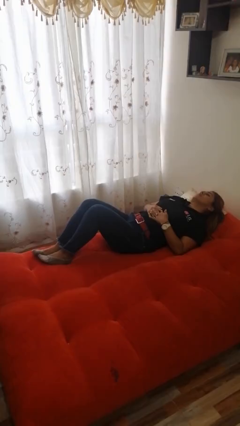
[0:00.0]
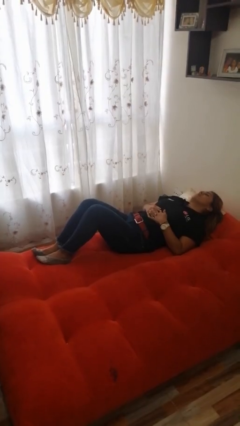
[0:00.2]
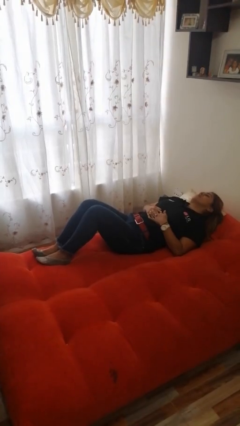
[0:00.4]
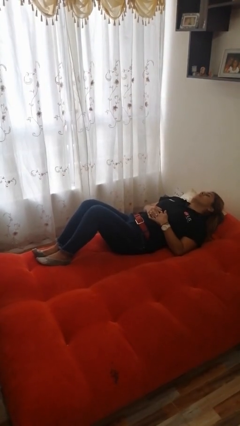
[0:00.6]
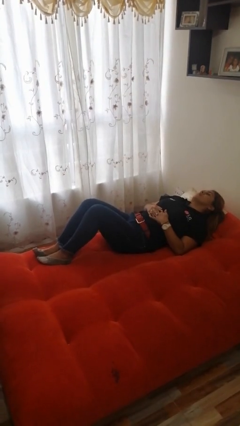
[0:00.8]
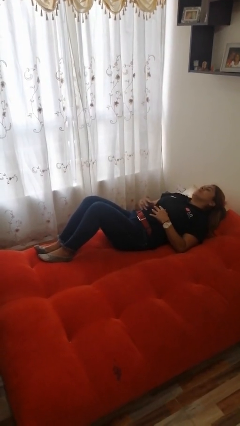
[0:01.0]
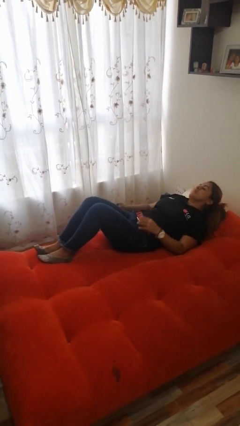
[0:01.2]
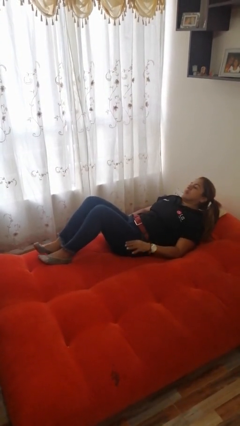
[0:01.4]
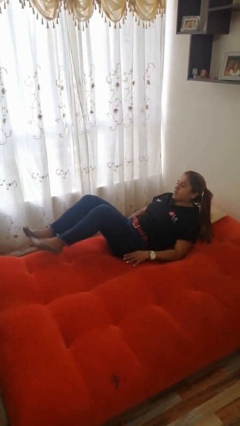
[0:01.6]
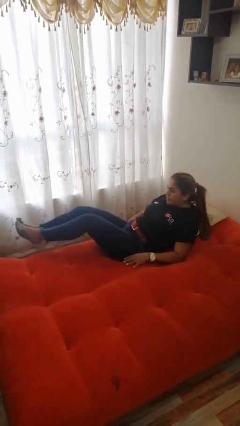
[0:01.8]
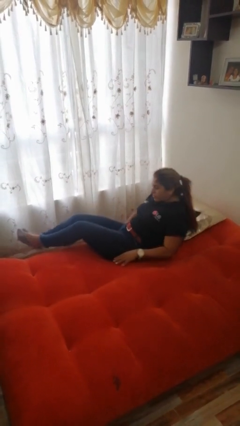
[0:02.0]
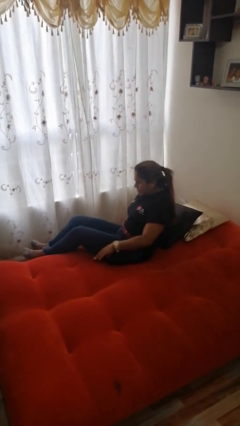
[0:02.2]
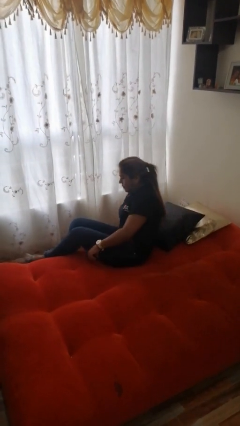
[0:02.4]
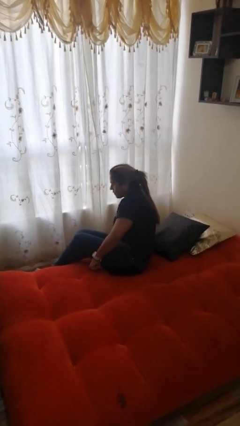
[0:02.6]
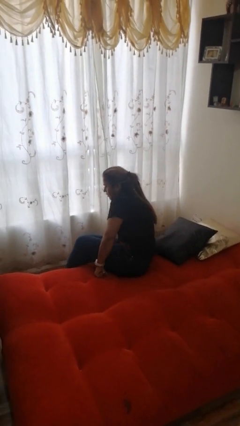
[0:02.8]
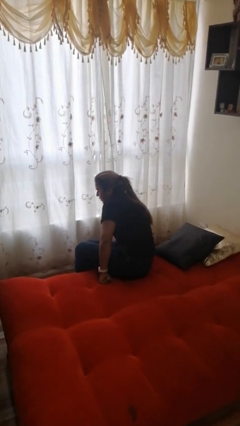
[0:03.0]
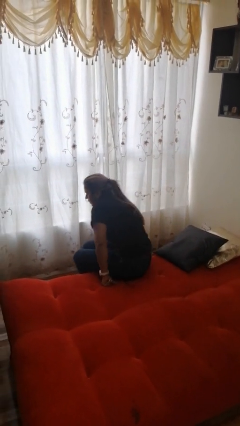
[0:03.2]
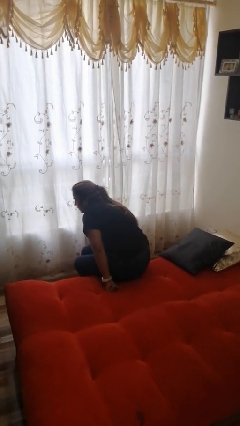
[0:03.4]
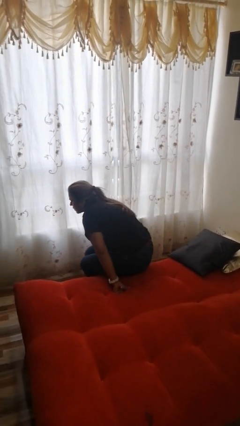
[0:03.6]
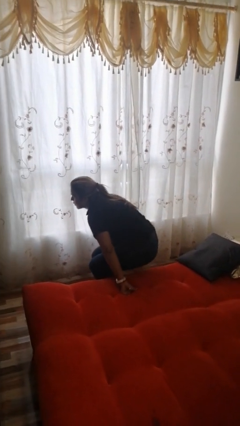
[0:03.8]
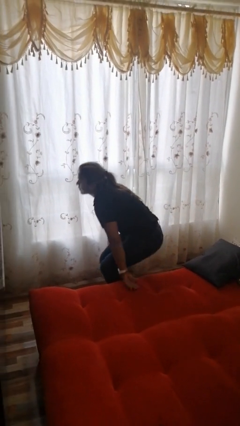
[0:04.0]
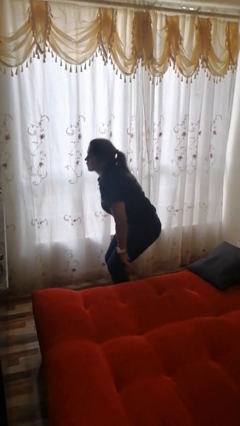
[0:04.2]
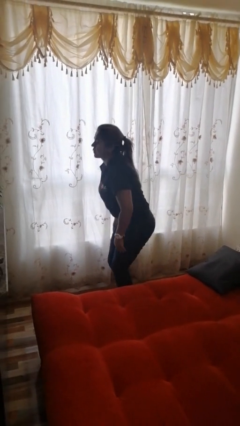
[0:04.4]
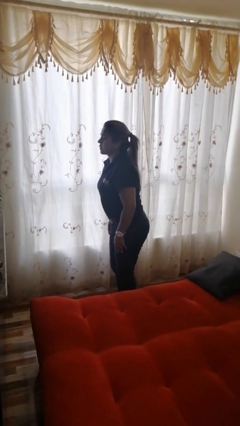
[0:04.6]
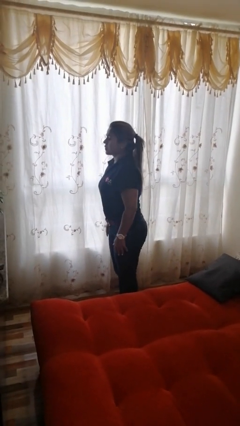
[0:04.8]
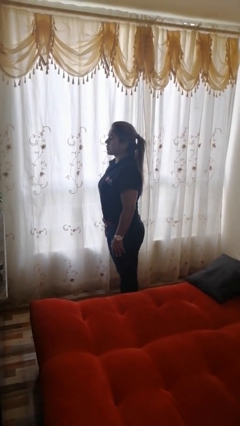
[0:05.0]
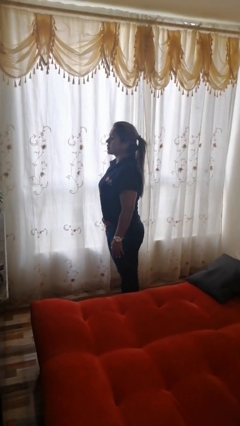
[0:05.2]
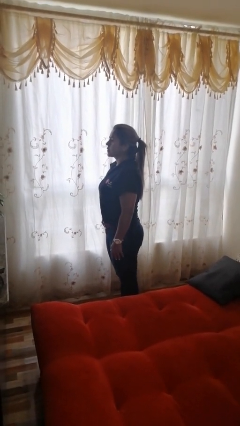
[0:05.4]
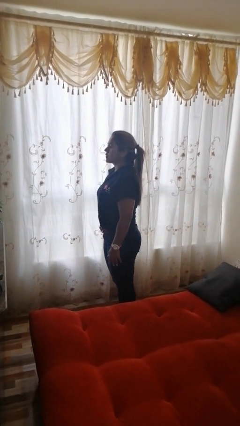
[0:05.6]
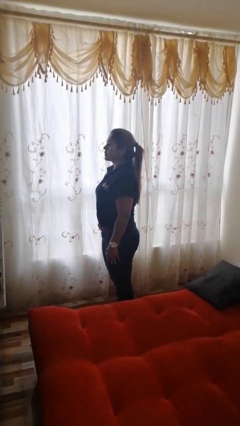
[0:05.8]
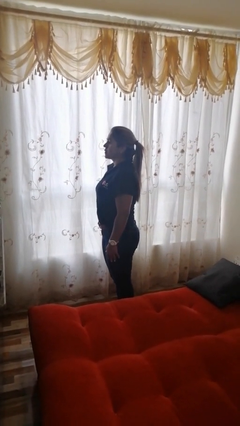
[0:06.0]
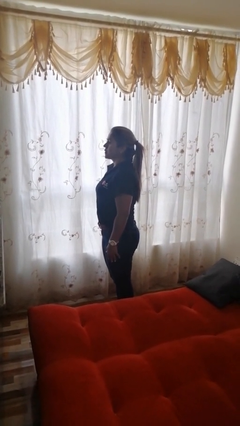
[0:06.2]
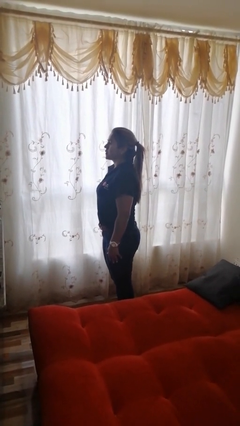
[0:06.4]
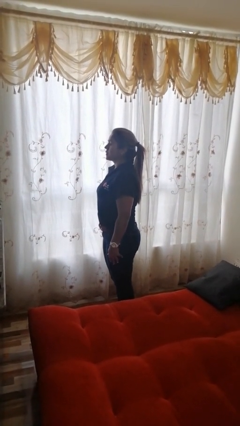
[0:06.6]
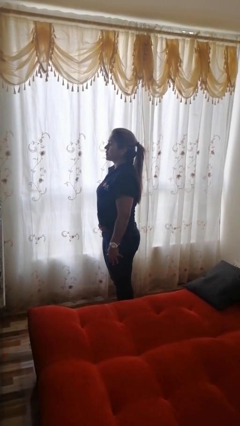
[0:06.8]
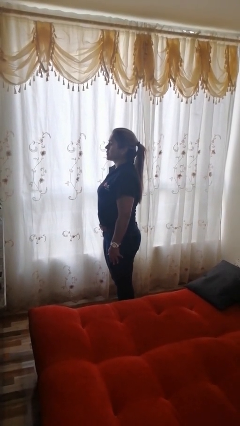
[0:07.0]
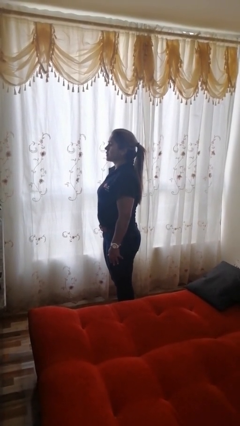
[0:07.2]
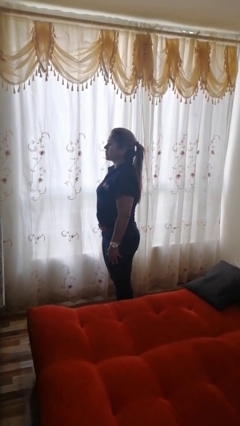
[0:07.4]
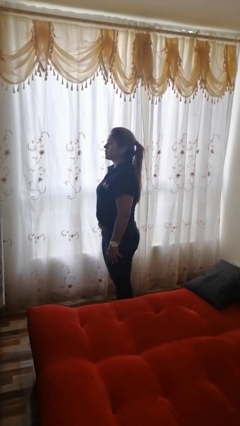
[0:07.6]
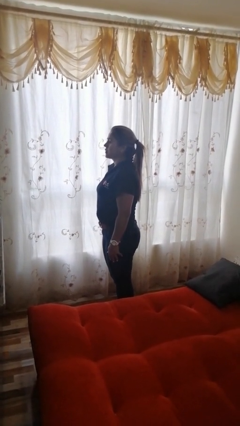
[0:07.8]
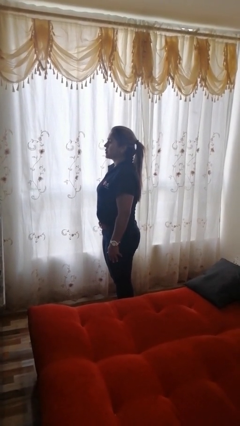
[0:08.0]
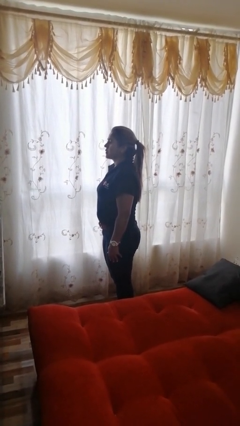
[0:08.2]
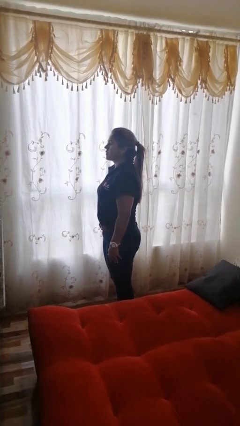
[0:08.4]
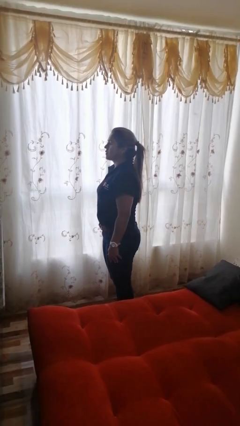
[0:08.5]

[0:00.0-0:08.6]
person stands up

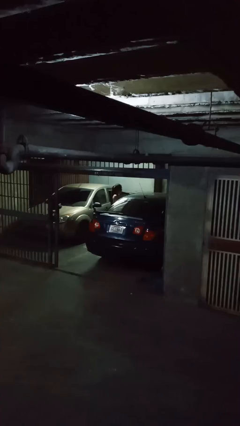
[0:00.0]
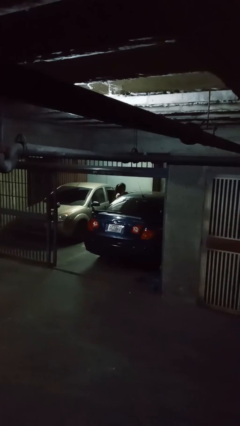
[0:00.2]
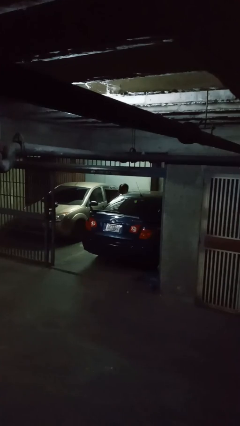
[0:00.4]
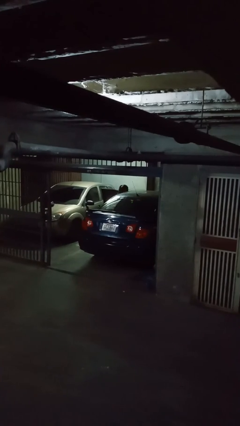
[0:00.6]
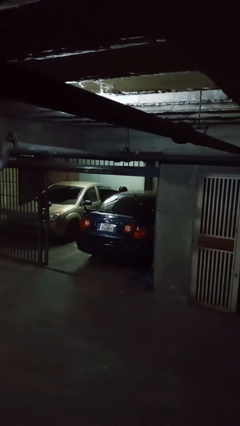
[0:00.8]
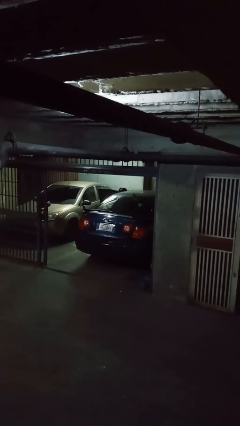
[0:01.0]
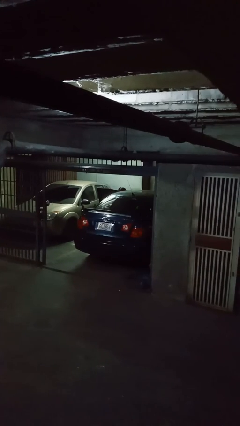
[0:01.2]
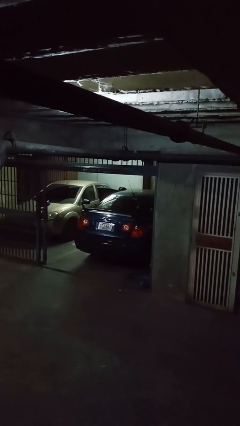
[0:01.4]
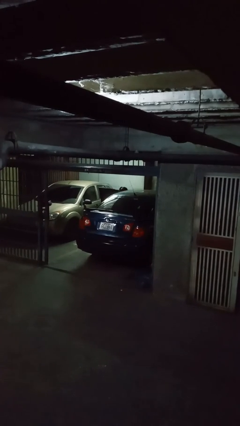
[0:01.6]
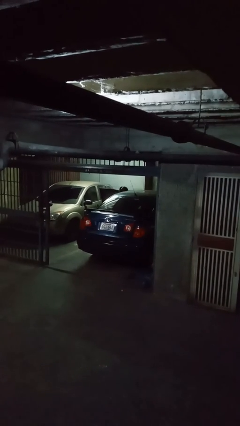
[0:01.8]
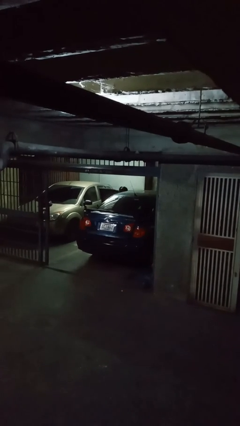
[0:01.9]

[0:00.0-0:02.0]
person loads car

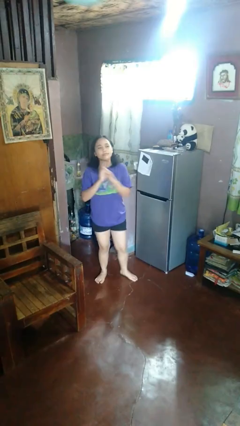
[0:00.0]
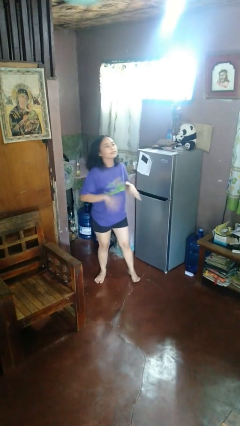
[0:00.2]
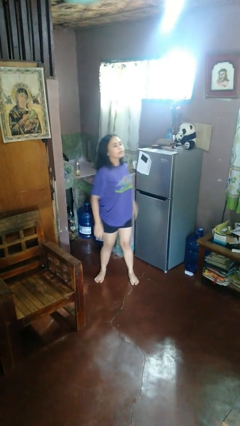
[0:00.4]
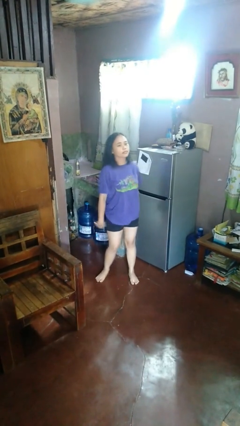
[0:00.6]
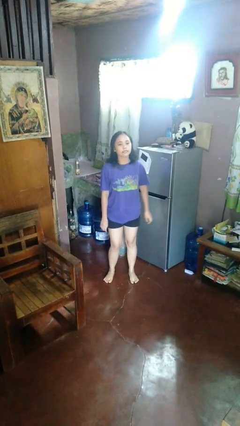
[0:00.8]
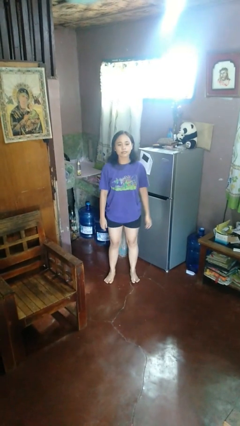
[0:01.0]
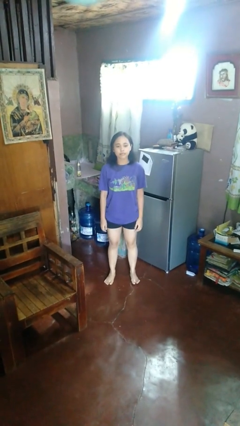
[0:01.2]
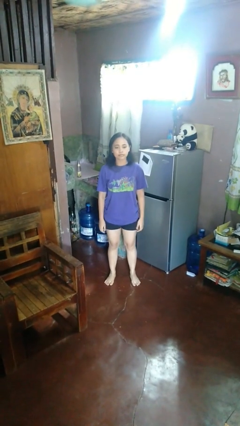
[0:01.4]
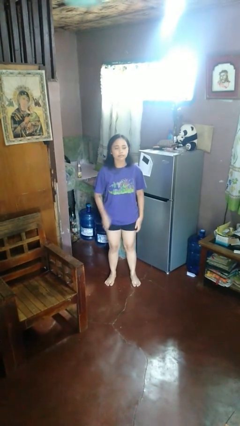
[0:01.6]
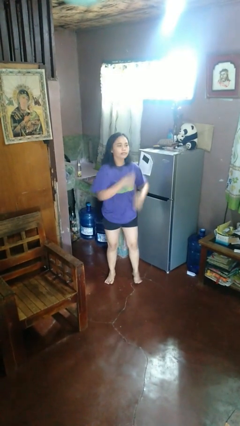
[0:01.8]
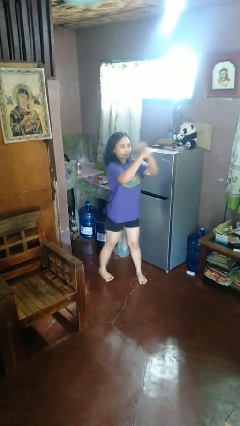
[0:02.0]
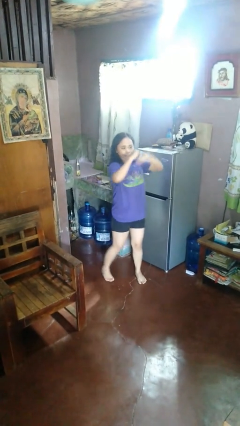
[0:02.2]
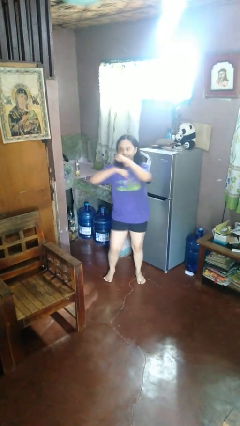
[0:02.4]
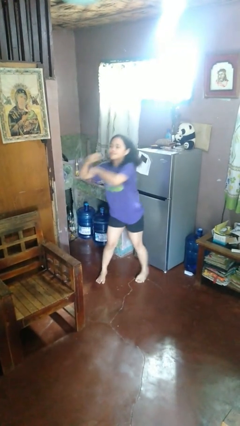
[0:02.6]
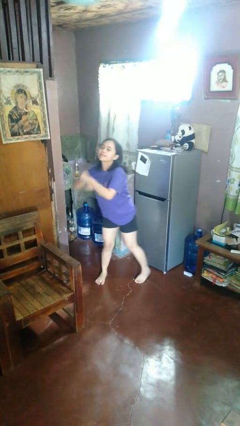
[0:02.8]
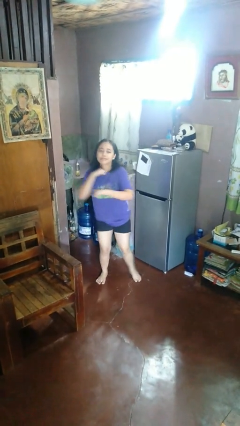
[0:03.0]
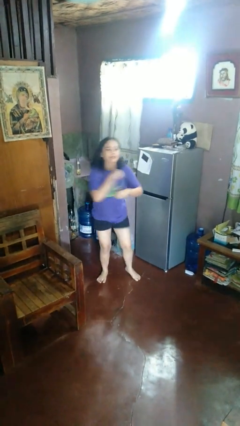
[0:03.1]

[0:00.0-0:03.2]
person dances in place

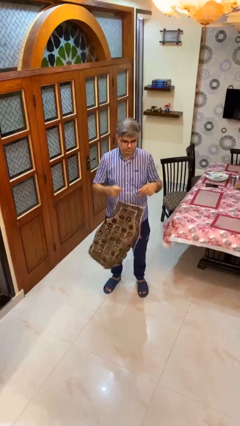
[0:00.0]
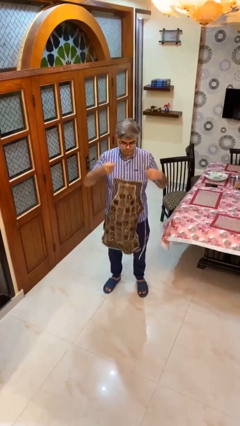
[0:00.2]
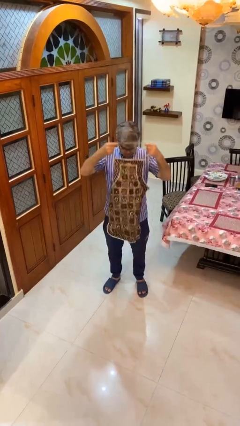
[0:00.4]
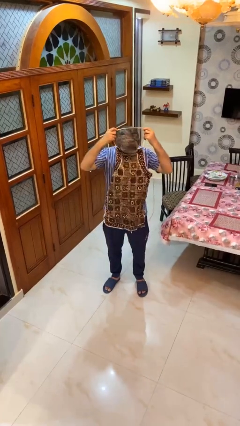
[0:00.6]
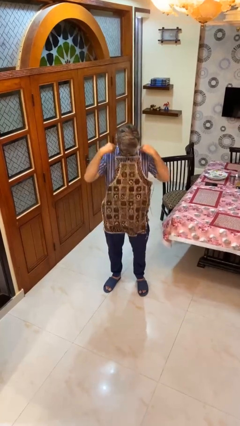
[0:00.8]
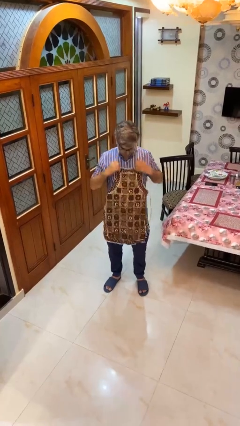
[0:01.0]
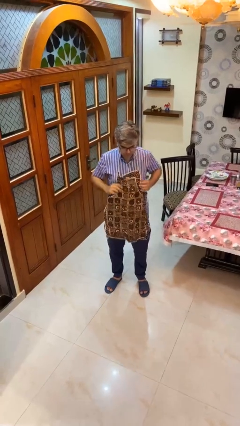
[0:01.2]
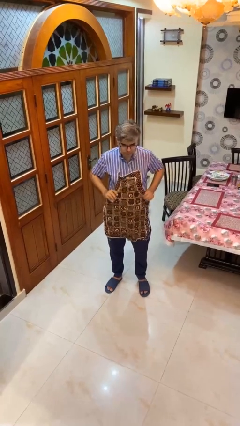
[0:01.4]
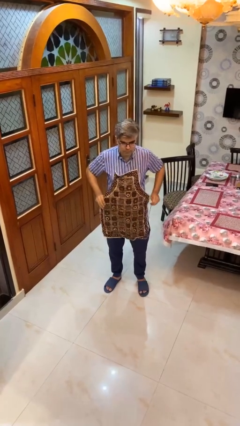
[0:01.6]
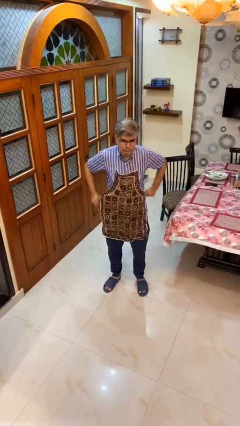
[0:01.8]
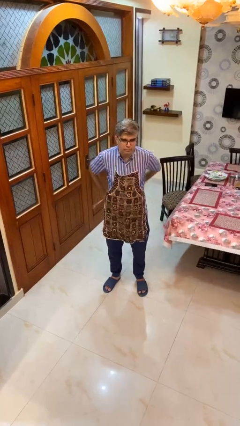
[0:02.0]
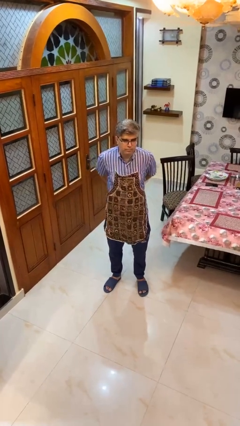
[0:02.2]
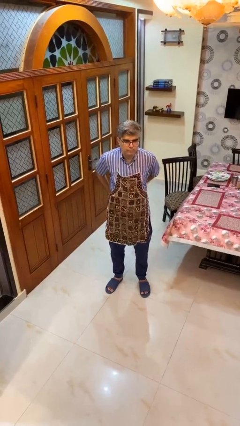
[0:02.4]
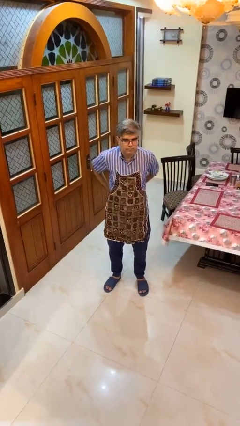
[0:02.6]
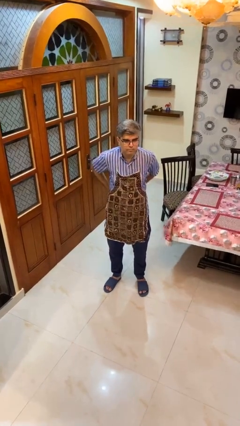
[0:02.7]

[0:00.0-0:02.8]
person puts on apron

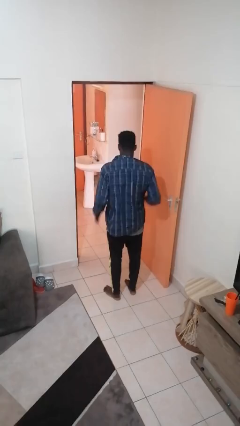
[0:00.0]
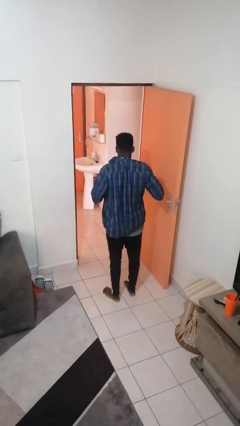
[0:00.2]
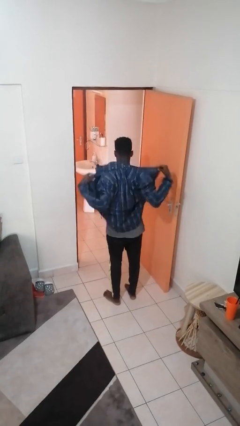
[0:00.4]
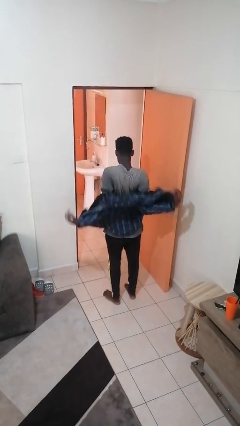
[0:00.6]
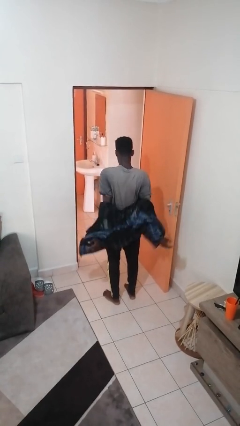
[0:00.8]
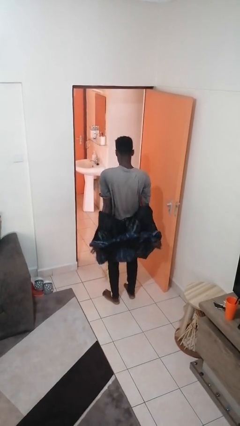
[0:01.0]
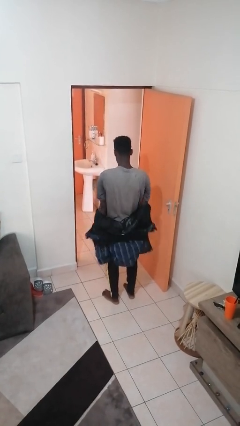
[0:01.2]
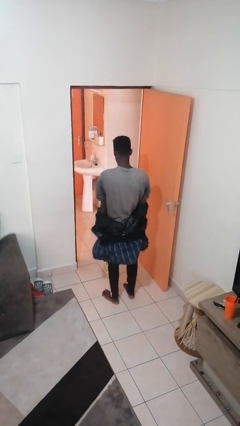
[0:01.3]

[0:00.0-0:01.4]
person takes off jacket
